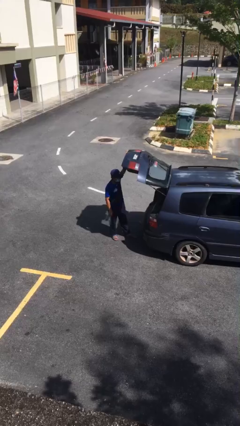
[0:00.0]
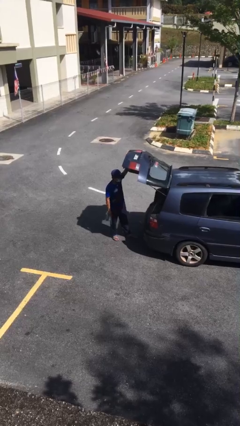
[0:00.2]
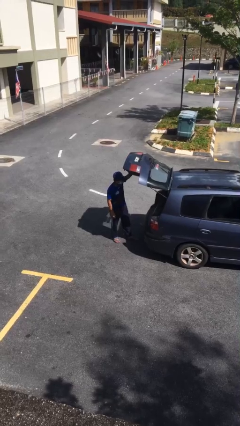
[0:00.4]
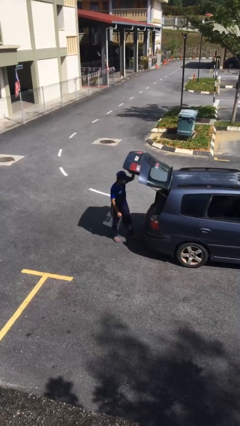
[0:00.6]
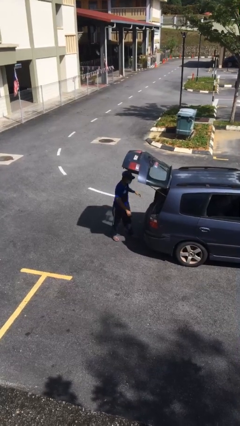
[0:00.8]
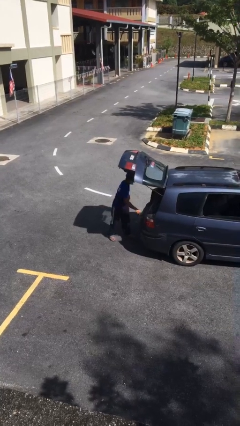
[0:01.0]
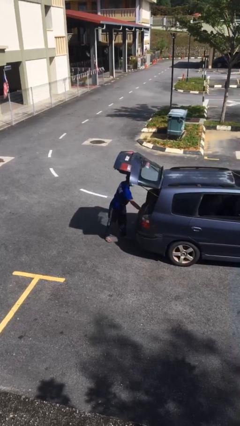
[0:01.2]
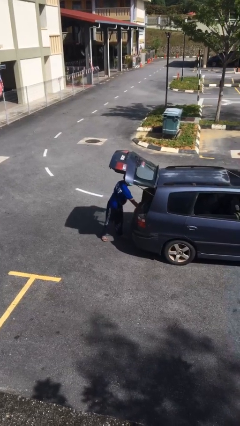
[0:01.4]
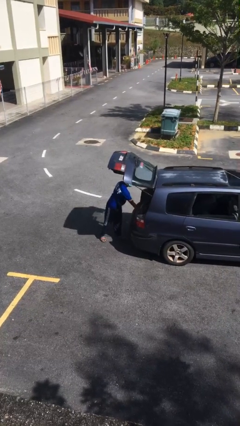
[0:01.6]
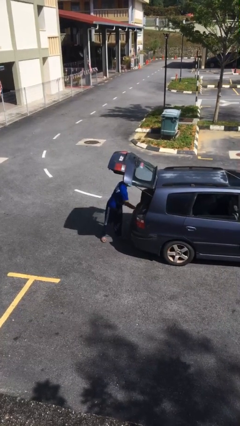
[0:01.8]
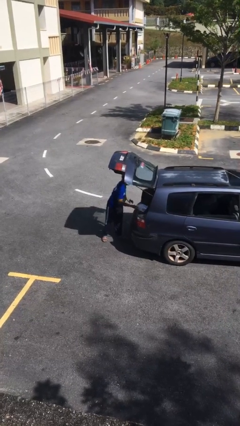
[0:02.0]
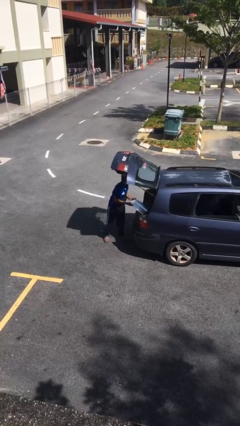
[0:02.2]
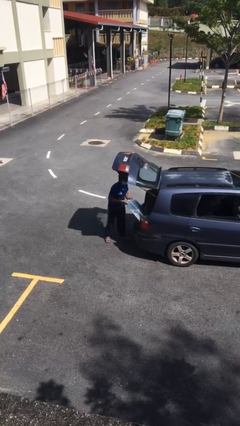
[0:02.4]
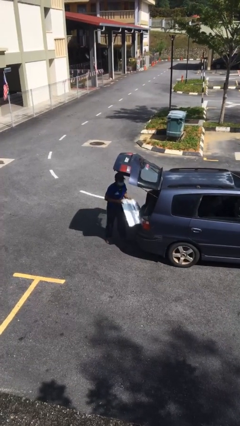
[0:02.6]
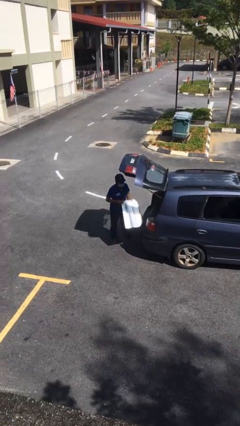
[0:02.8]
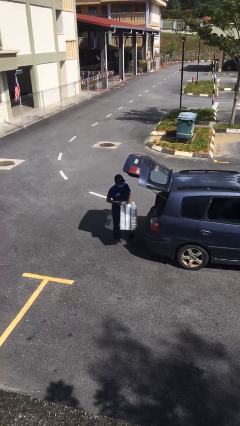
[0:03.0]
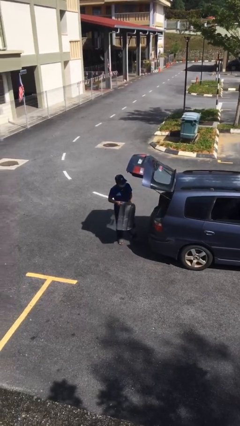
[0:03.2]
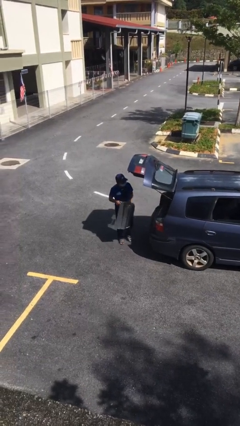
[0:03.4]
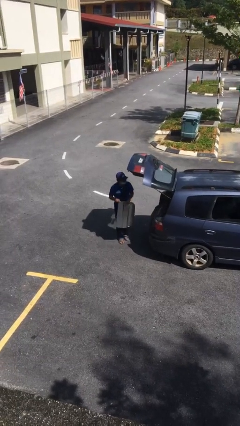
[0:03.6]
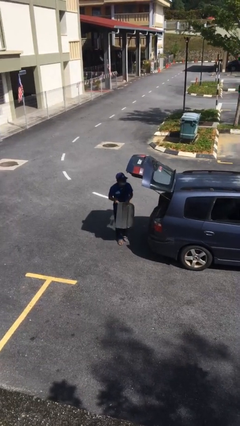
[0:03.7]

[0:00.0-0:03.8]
person unloads car

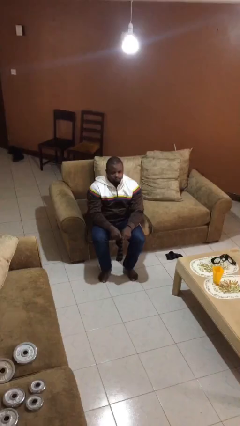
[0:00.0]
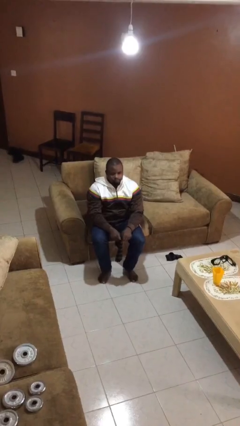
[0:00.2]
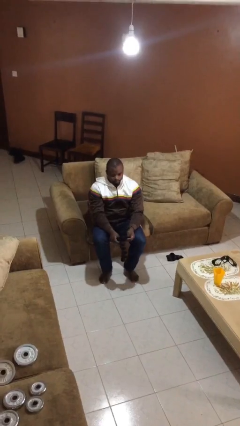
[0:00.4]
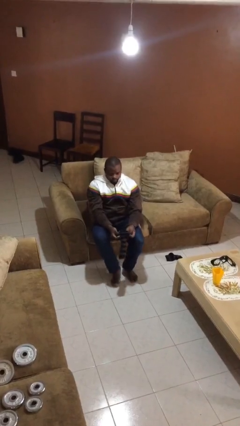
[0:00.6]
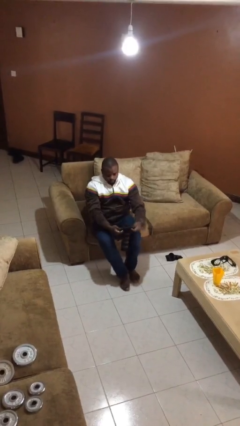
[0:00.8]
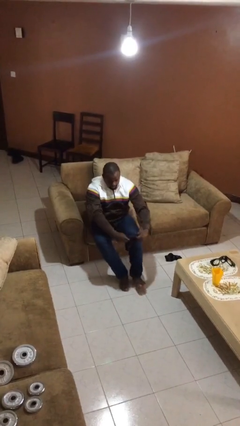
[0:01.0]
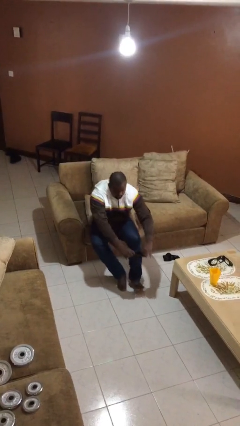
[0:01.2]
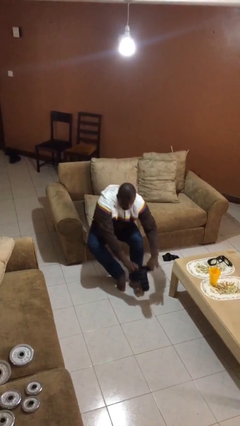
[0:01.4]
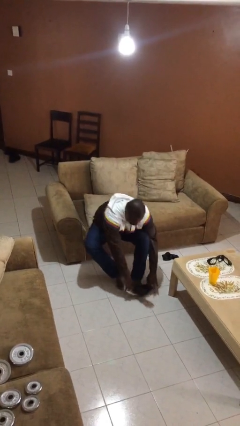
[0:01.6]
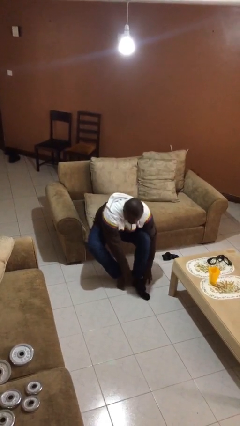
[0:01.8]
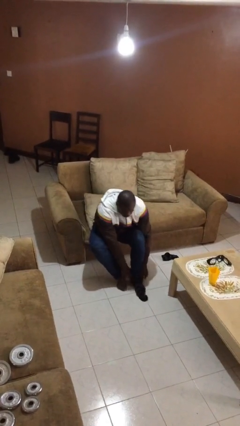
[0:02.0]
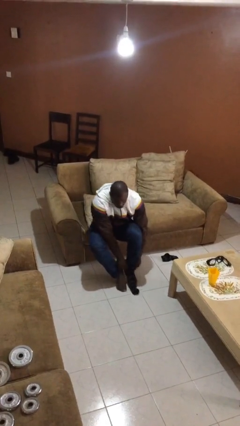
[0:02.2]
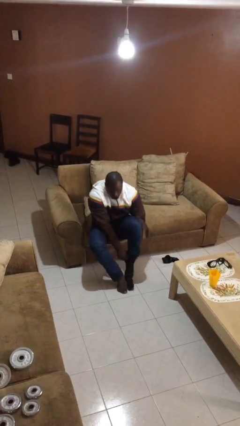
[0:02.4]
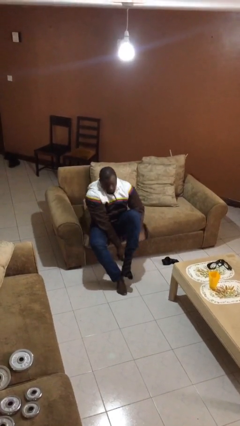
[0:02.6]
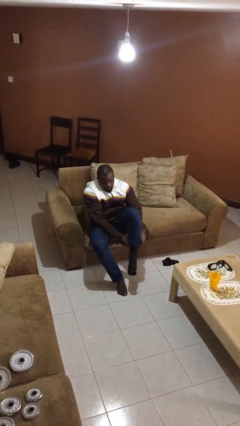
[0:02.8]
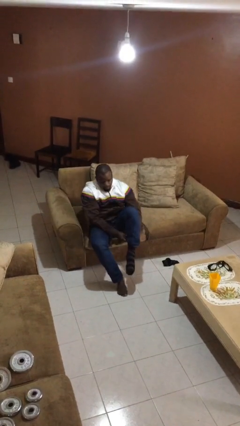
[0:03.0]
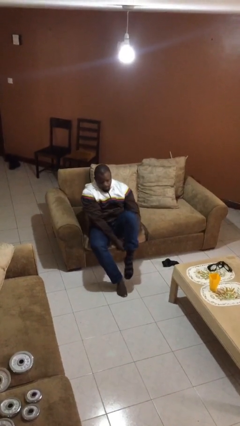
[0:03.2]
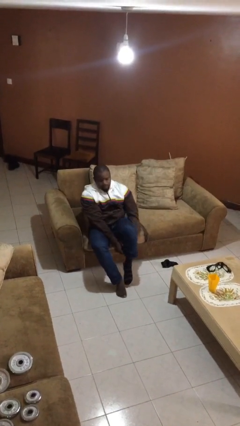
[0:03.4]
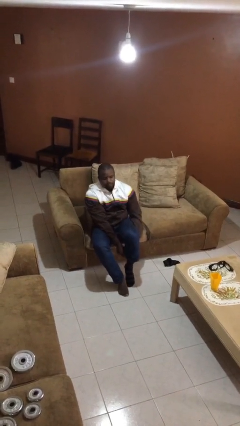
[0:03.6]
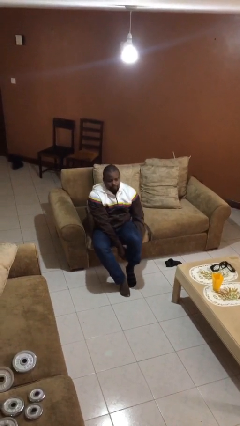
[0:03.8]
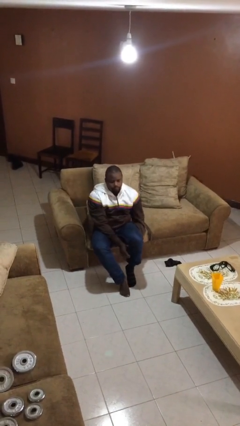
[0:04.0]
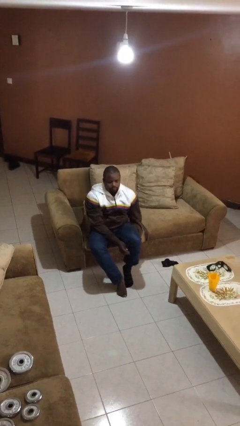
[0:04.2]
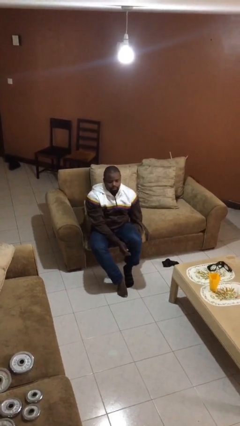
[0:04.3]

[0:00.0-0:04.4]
person puts on socks

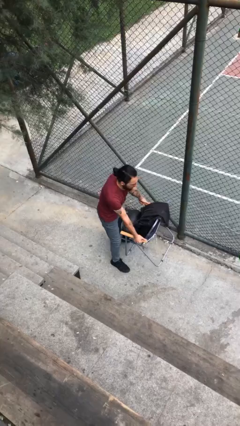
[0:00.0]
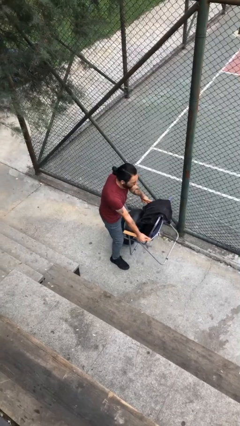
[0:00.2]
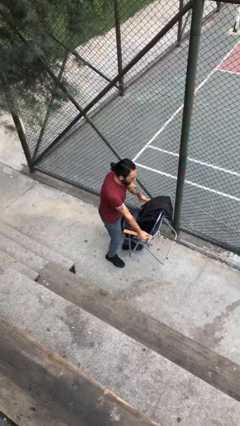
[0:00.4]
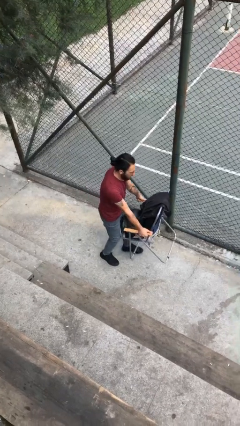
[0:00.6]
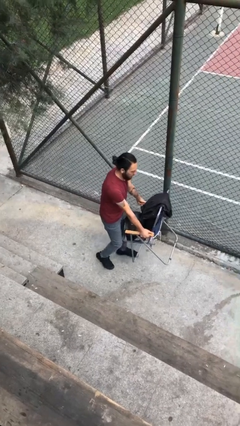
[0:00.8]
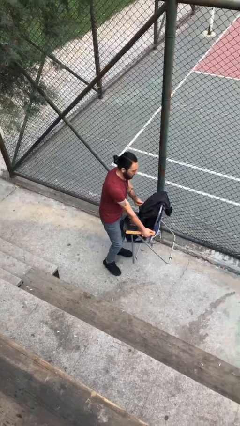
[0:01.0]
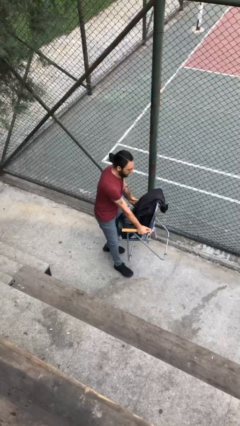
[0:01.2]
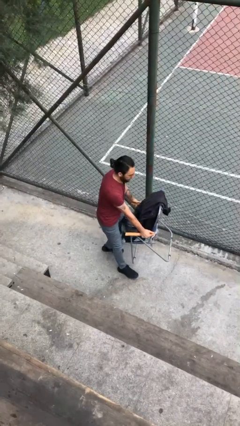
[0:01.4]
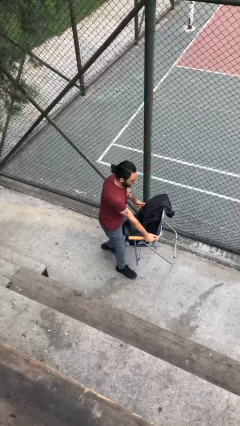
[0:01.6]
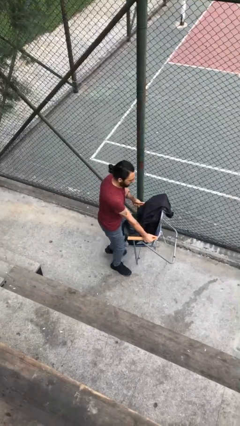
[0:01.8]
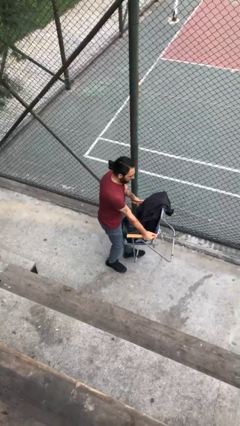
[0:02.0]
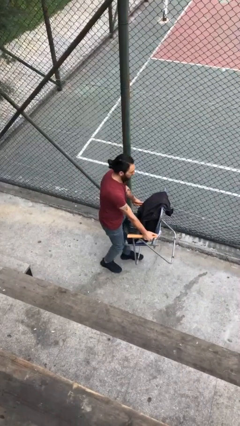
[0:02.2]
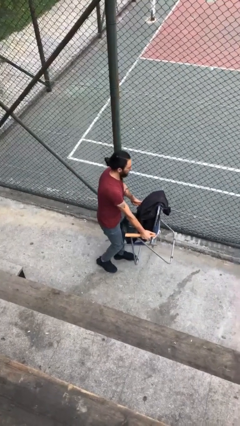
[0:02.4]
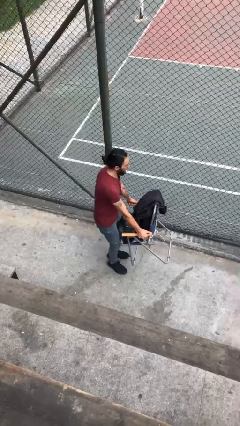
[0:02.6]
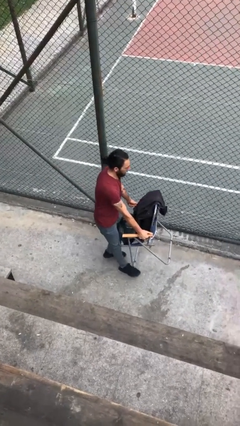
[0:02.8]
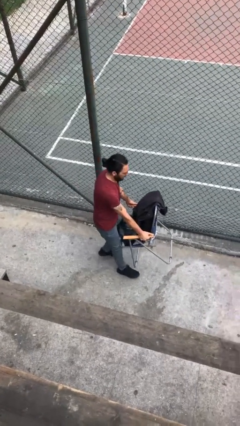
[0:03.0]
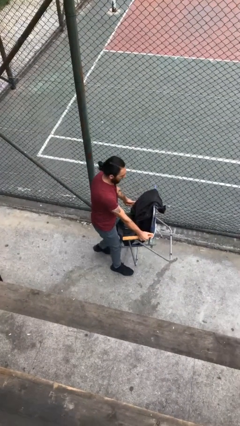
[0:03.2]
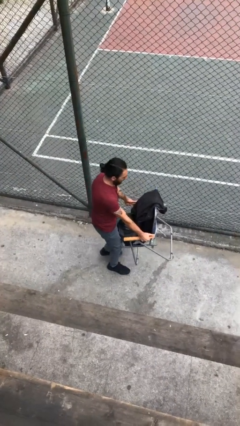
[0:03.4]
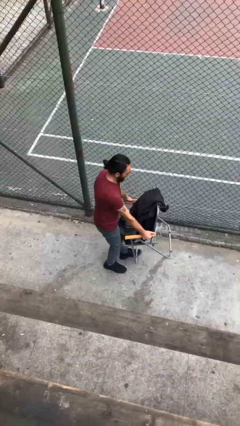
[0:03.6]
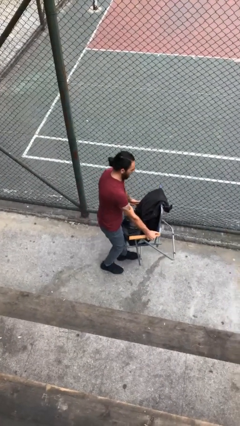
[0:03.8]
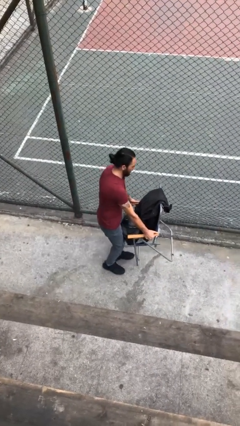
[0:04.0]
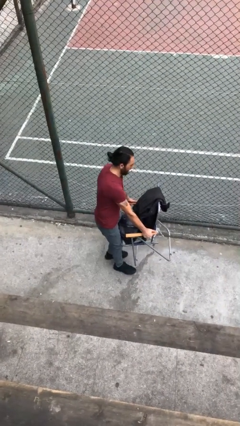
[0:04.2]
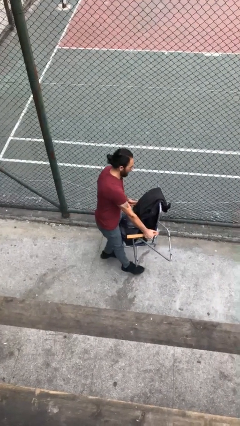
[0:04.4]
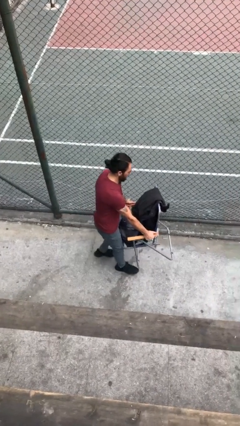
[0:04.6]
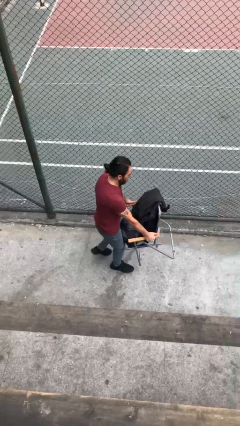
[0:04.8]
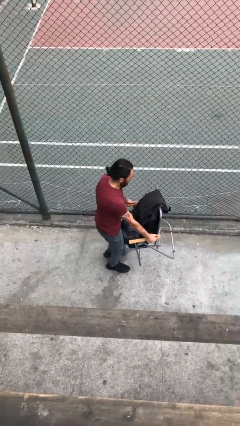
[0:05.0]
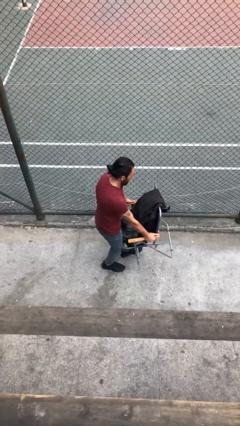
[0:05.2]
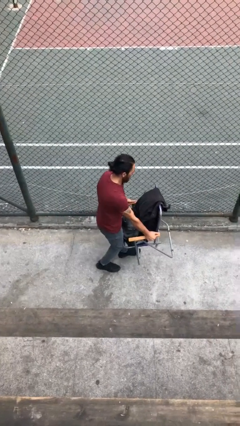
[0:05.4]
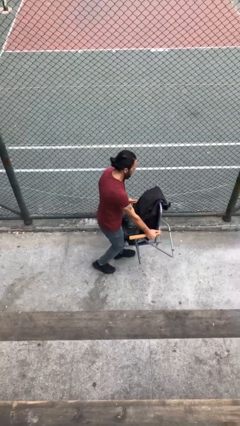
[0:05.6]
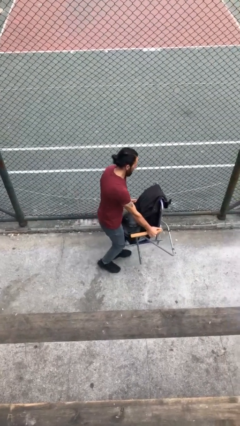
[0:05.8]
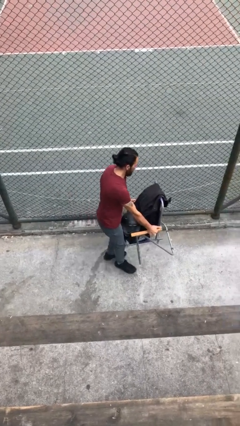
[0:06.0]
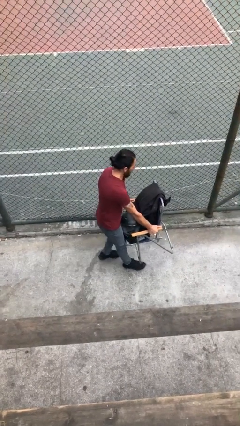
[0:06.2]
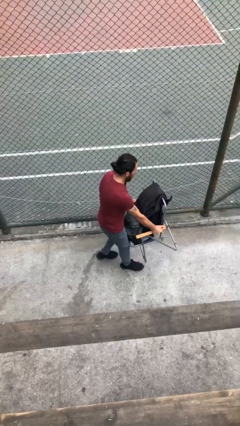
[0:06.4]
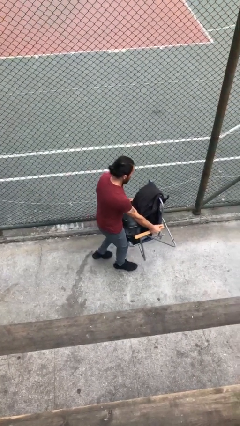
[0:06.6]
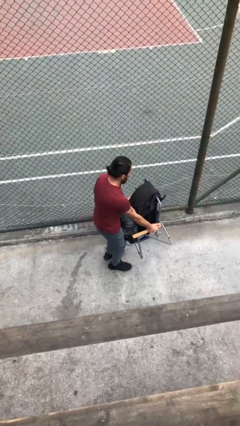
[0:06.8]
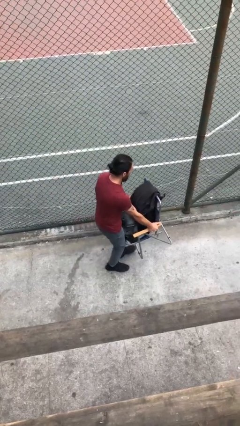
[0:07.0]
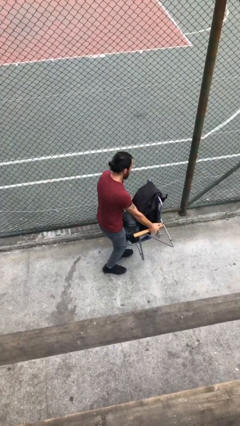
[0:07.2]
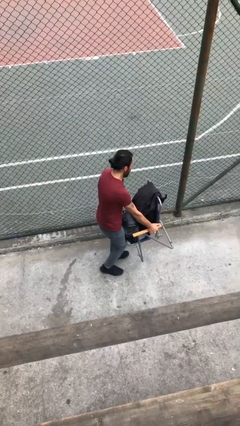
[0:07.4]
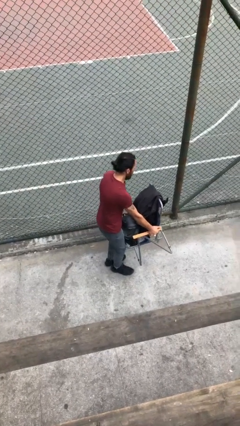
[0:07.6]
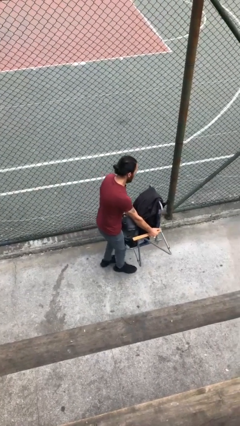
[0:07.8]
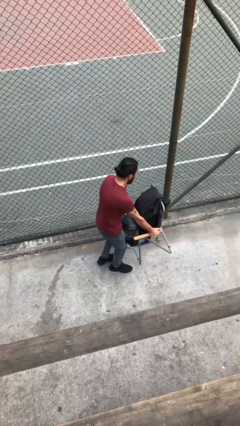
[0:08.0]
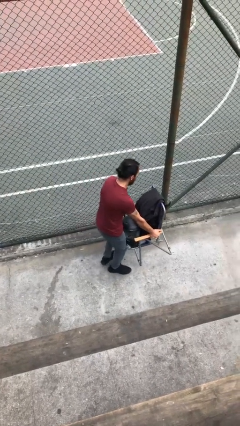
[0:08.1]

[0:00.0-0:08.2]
person carries heavy object

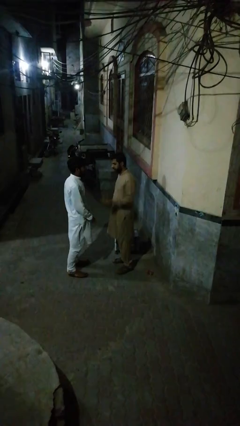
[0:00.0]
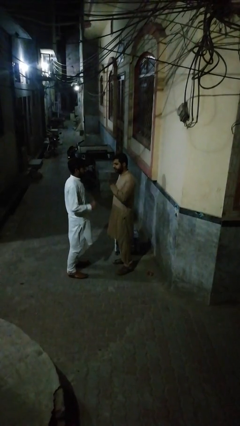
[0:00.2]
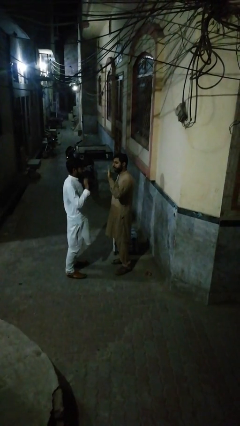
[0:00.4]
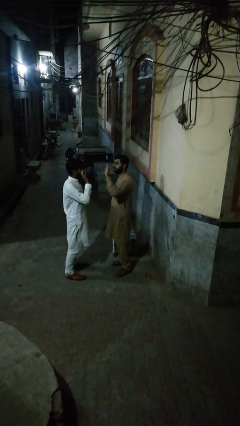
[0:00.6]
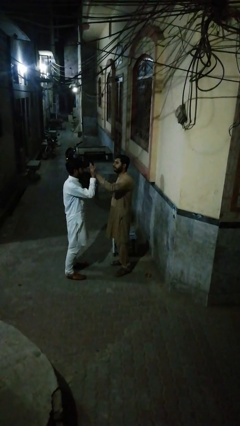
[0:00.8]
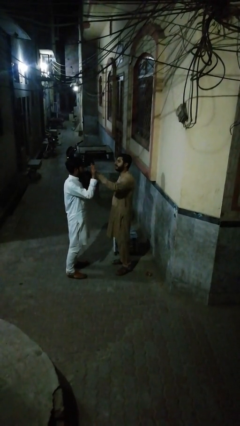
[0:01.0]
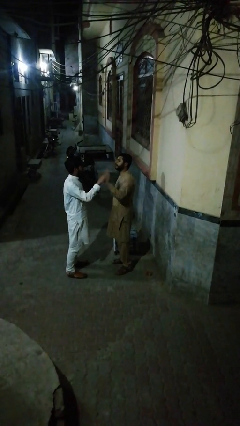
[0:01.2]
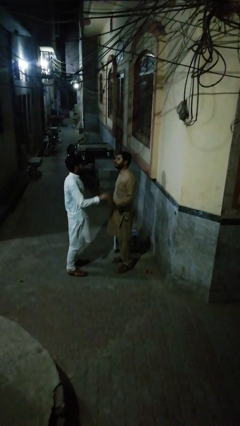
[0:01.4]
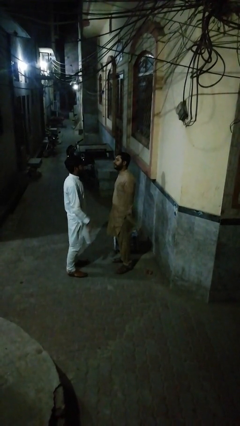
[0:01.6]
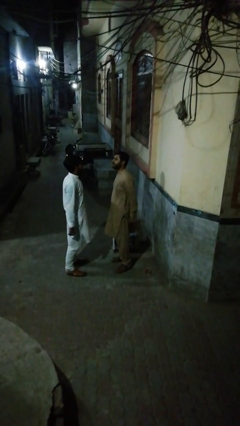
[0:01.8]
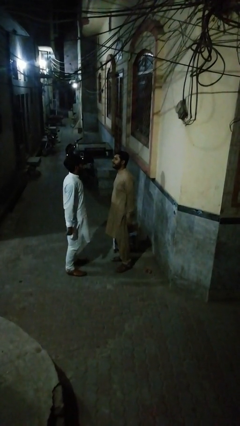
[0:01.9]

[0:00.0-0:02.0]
person highfives hand
